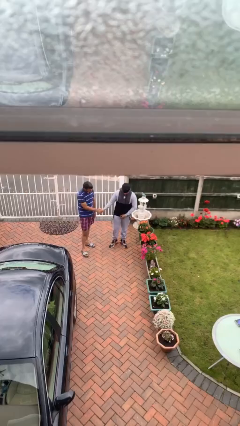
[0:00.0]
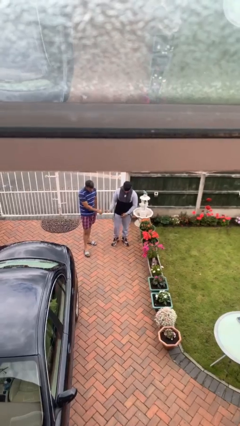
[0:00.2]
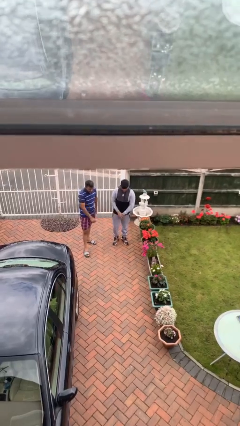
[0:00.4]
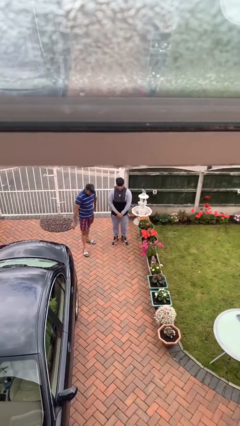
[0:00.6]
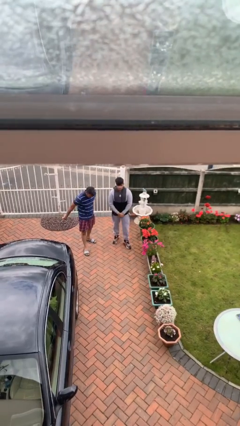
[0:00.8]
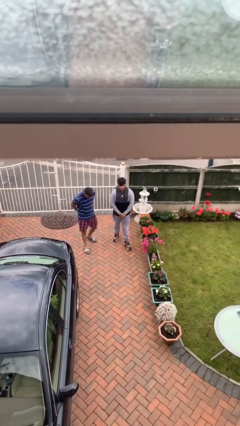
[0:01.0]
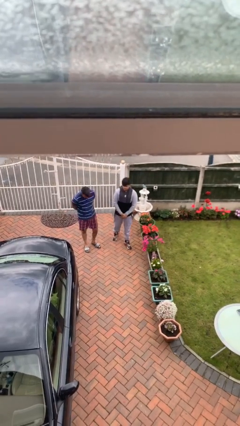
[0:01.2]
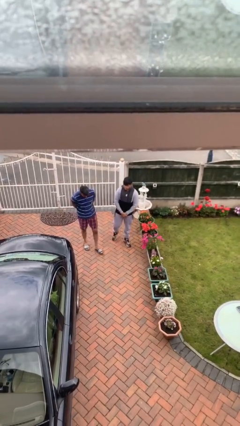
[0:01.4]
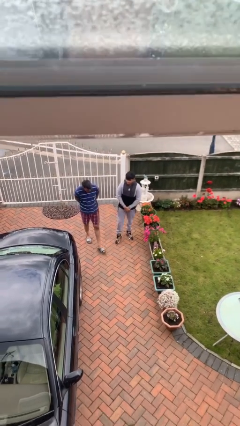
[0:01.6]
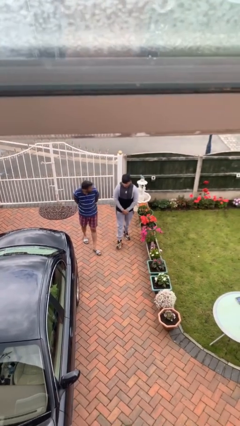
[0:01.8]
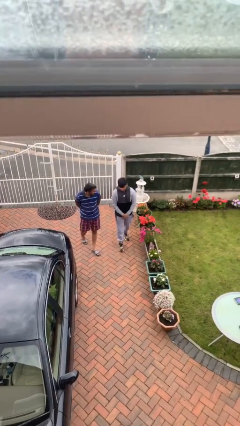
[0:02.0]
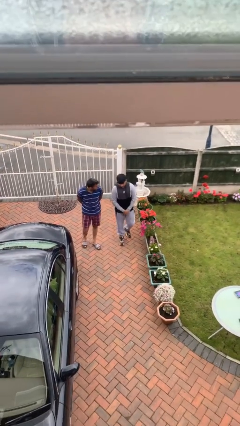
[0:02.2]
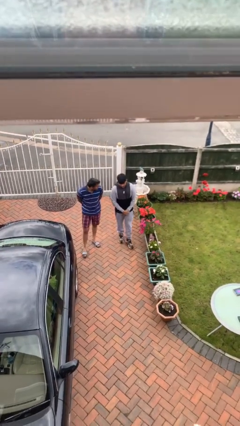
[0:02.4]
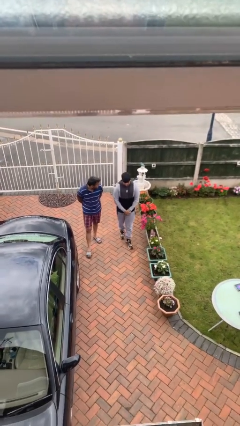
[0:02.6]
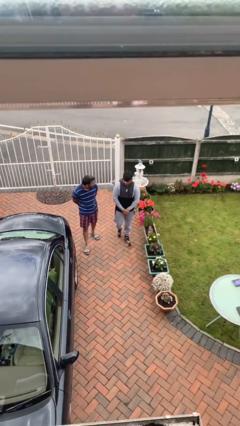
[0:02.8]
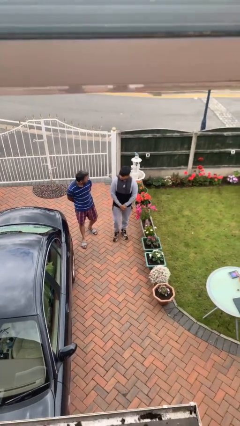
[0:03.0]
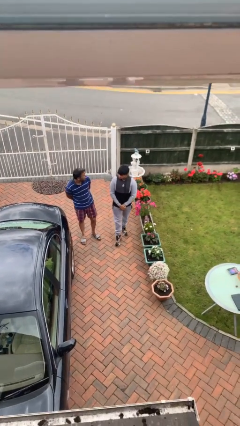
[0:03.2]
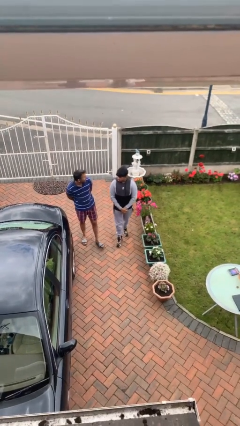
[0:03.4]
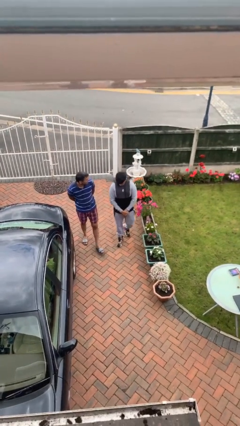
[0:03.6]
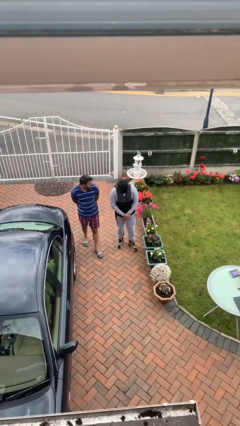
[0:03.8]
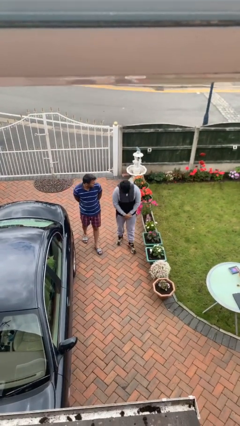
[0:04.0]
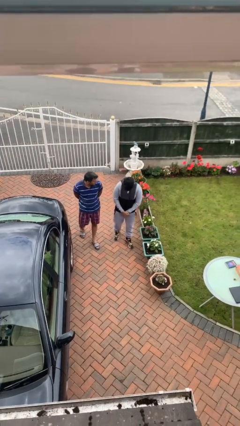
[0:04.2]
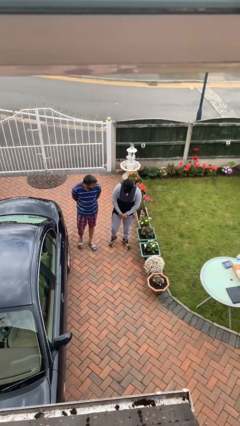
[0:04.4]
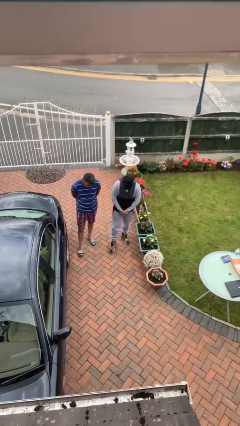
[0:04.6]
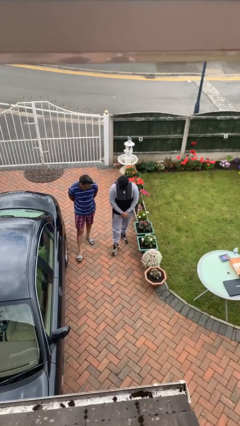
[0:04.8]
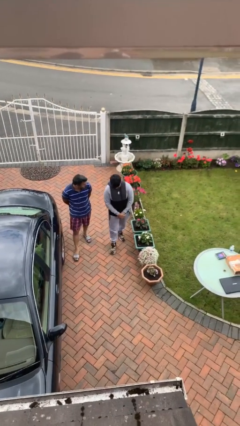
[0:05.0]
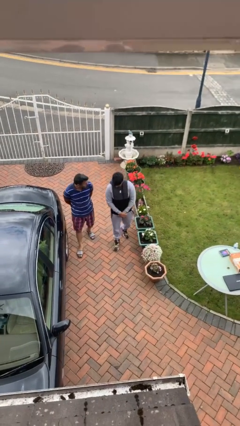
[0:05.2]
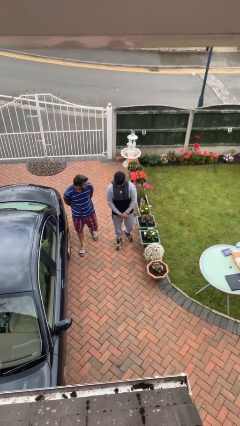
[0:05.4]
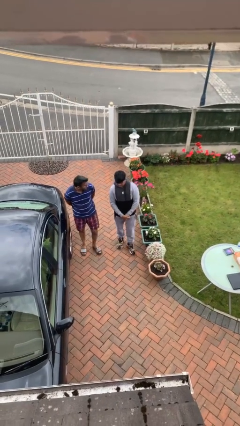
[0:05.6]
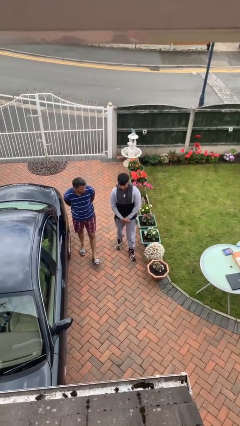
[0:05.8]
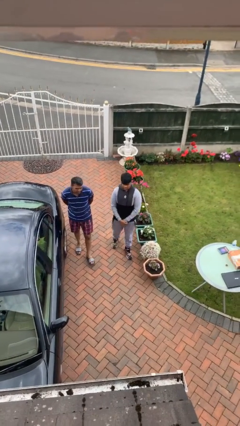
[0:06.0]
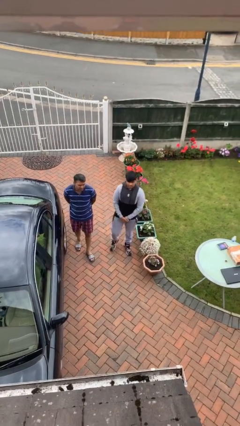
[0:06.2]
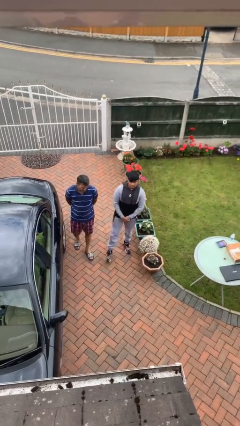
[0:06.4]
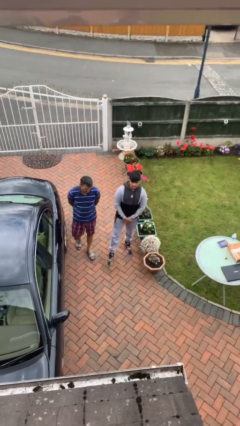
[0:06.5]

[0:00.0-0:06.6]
person talks to person

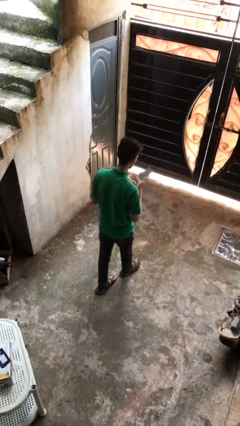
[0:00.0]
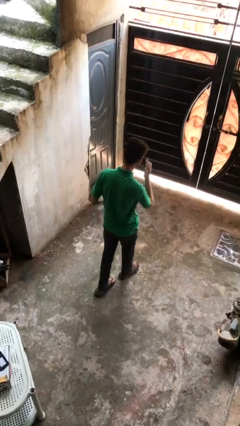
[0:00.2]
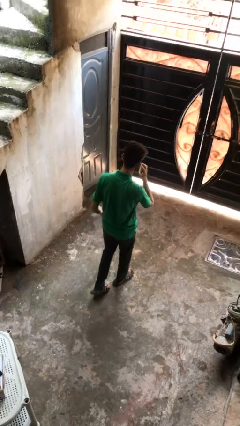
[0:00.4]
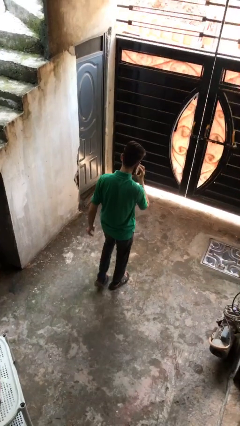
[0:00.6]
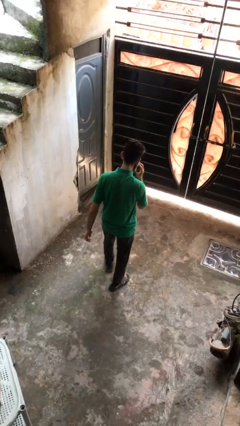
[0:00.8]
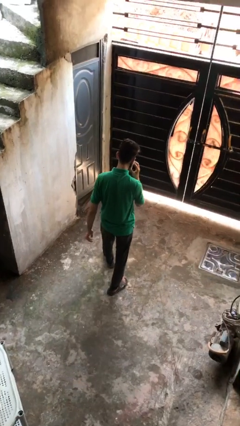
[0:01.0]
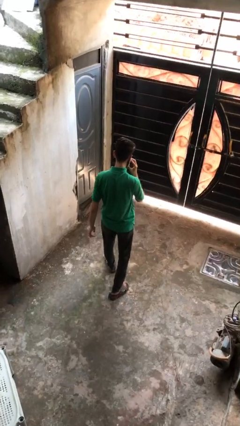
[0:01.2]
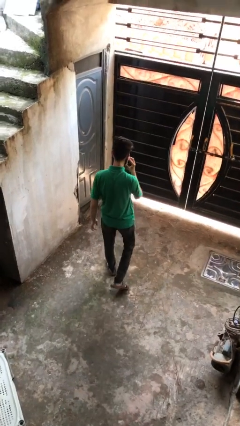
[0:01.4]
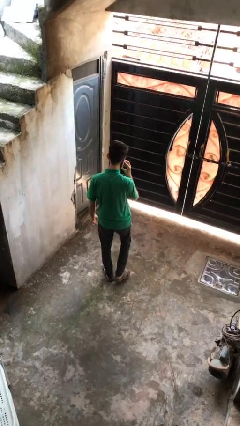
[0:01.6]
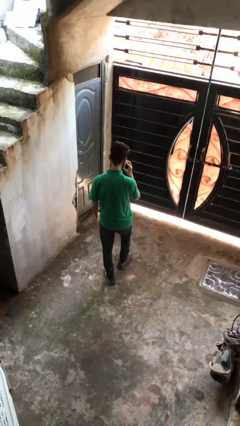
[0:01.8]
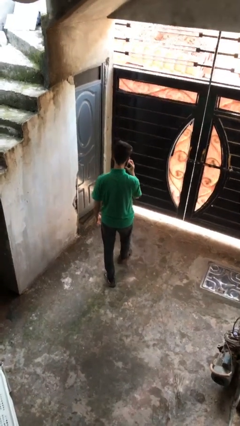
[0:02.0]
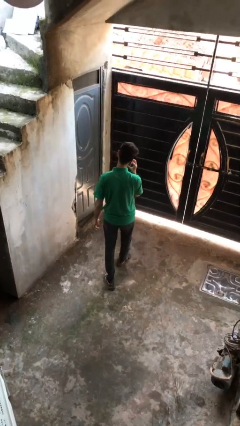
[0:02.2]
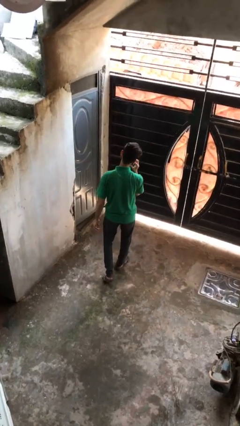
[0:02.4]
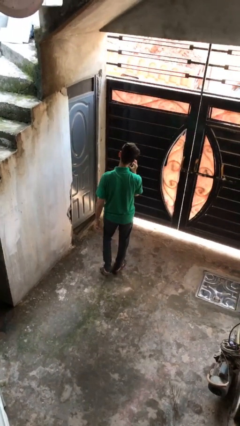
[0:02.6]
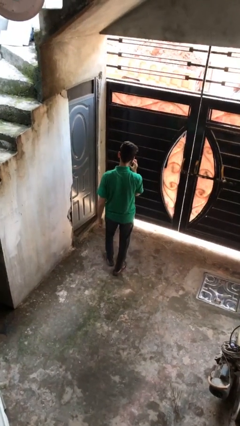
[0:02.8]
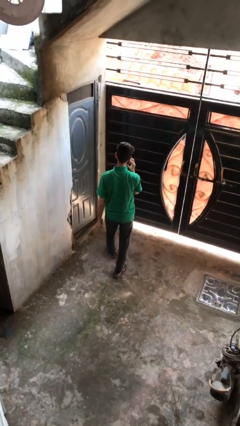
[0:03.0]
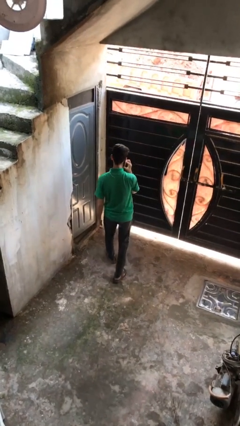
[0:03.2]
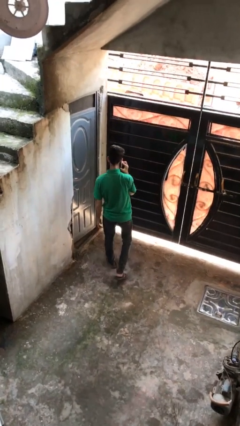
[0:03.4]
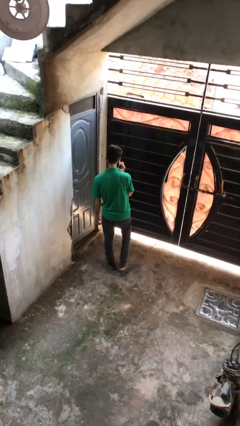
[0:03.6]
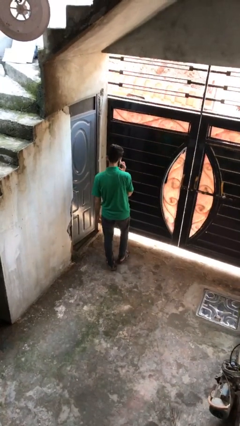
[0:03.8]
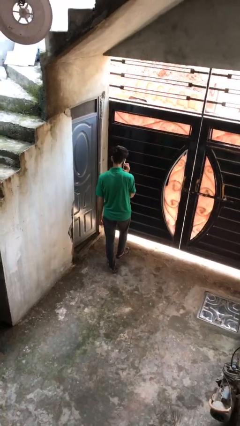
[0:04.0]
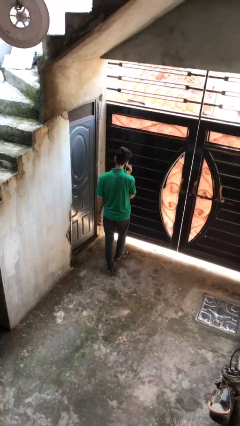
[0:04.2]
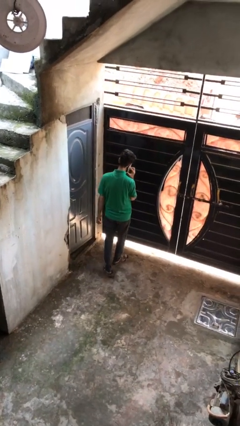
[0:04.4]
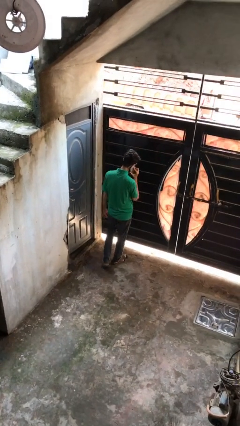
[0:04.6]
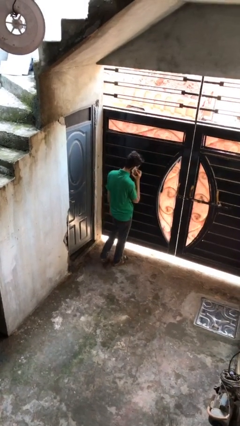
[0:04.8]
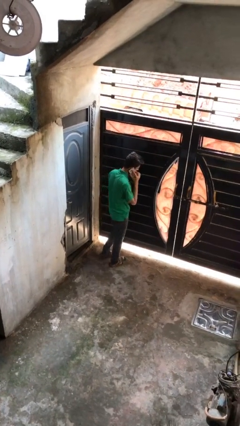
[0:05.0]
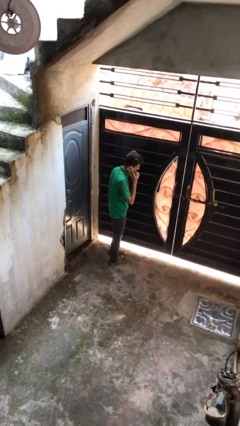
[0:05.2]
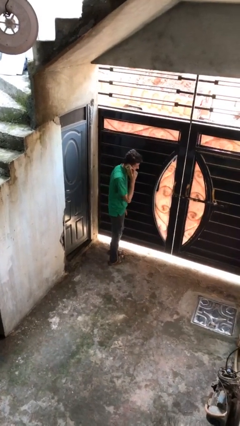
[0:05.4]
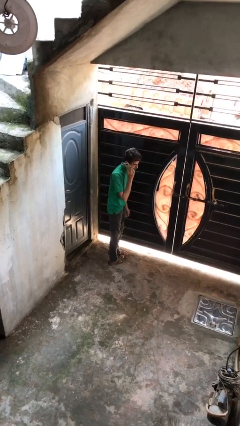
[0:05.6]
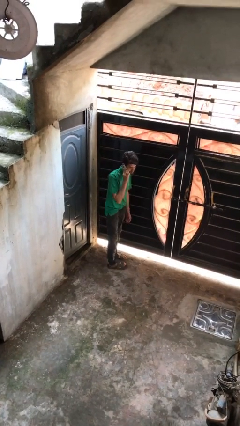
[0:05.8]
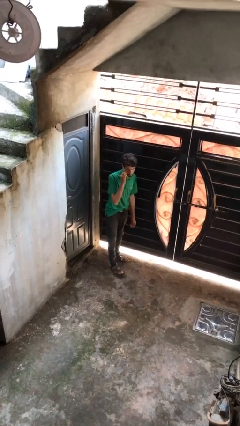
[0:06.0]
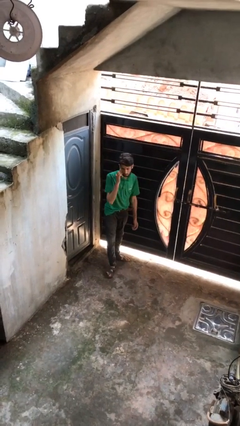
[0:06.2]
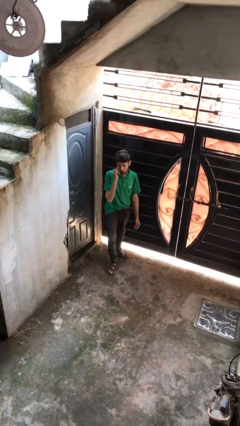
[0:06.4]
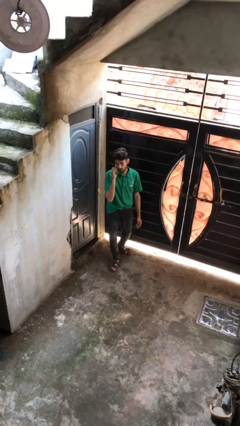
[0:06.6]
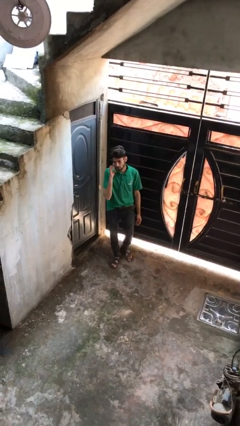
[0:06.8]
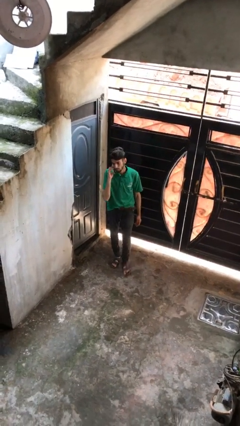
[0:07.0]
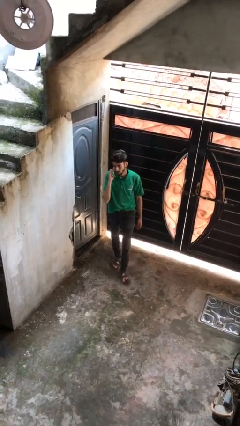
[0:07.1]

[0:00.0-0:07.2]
person talks on phone

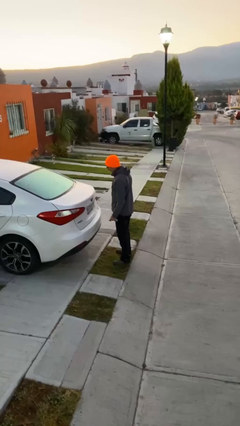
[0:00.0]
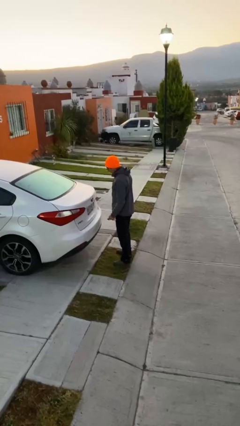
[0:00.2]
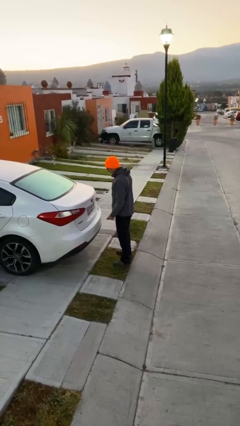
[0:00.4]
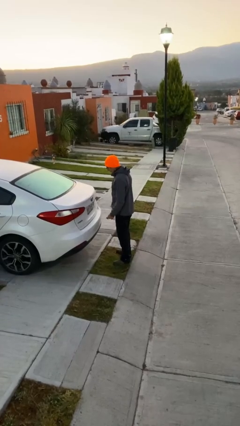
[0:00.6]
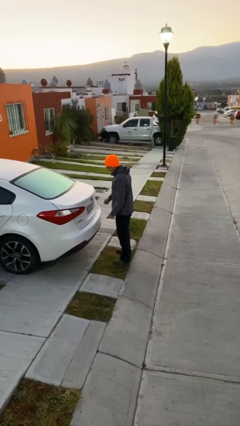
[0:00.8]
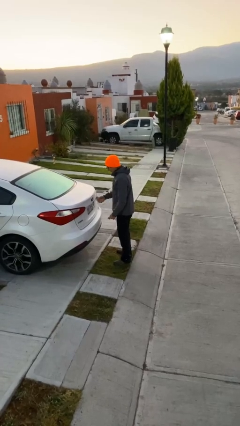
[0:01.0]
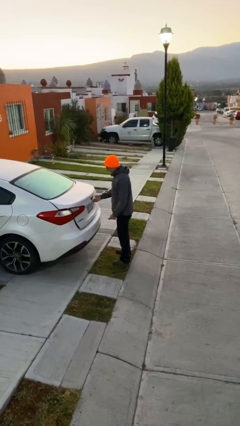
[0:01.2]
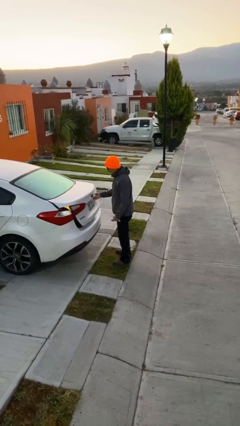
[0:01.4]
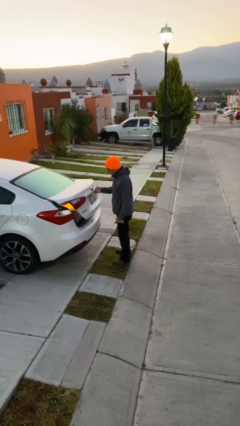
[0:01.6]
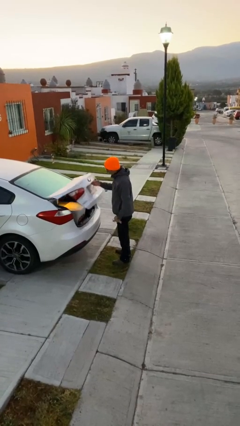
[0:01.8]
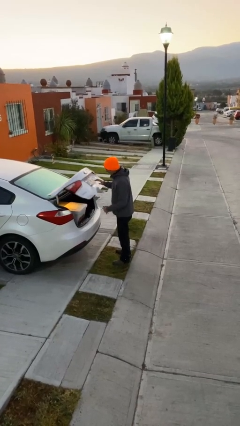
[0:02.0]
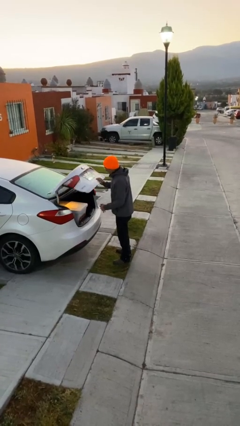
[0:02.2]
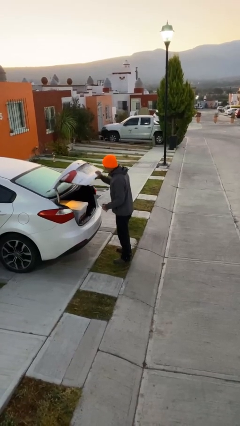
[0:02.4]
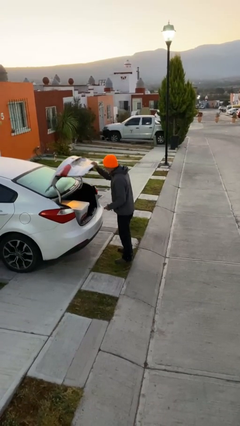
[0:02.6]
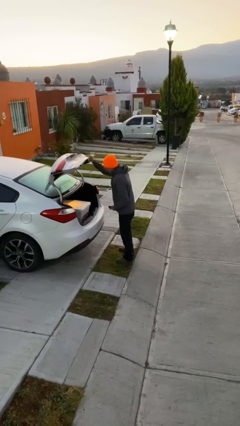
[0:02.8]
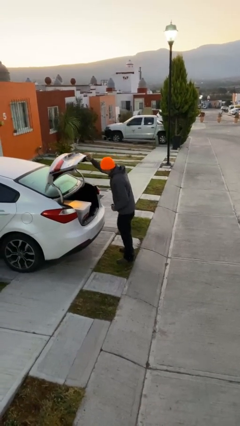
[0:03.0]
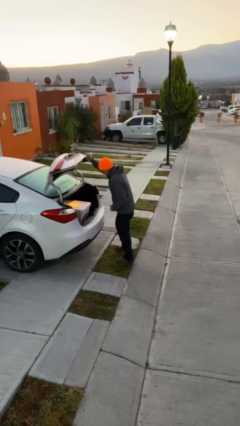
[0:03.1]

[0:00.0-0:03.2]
person opens car trunk

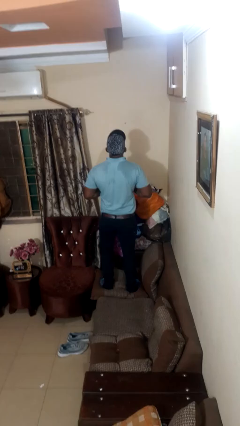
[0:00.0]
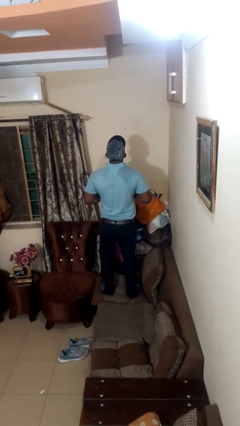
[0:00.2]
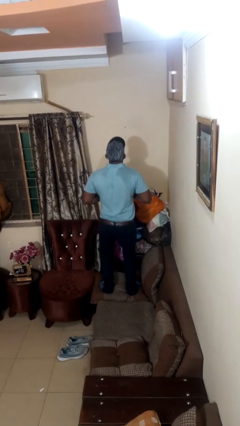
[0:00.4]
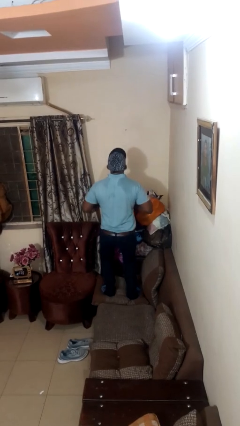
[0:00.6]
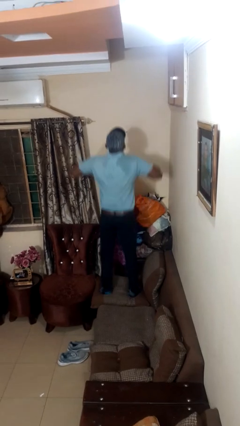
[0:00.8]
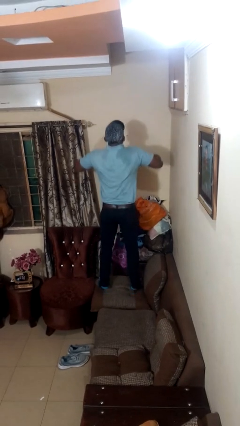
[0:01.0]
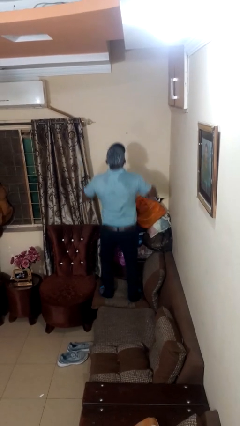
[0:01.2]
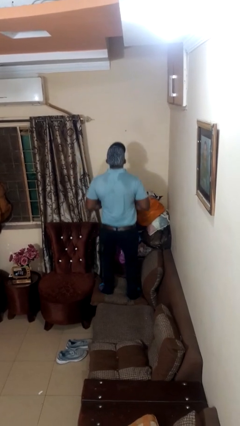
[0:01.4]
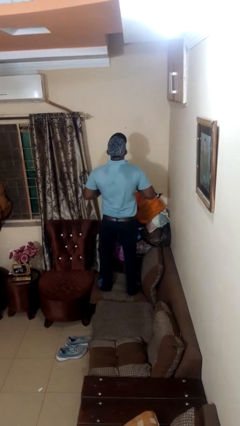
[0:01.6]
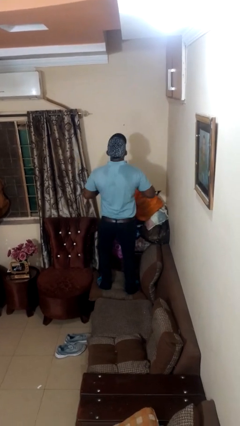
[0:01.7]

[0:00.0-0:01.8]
person jumps on couch
